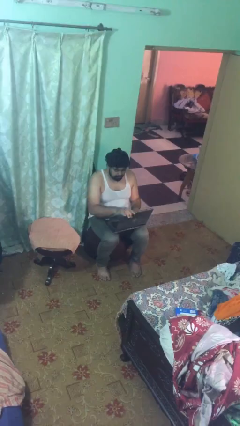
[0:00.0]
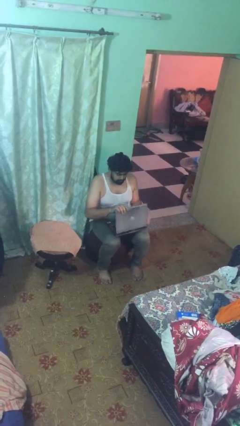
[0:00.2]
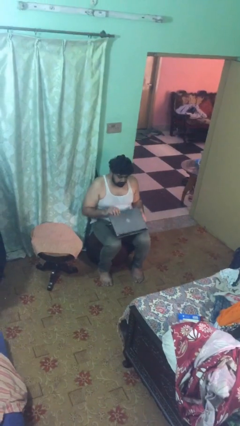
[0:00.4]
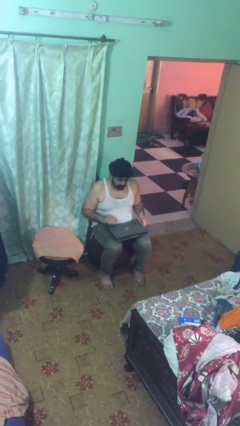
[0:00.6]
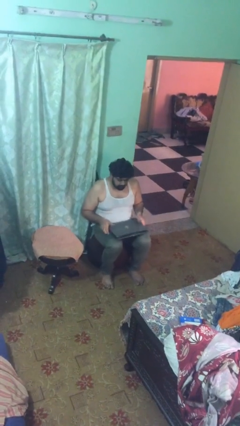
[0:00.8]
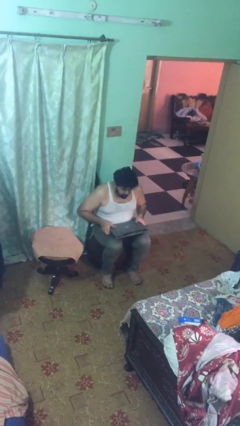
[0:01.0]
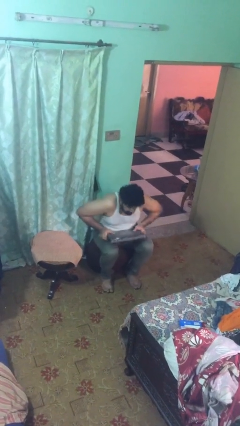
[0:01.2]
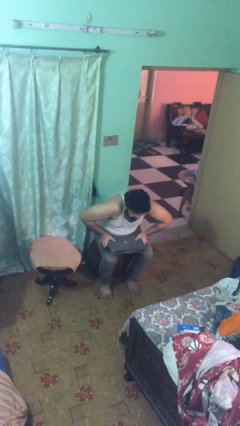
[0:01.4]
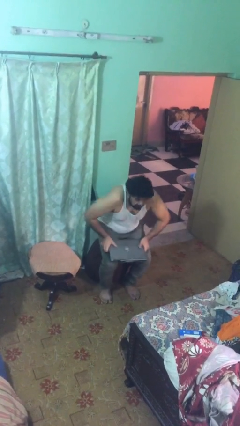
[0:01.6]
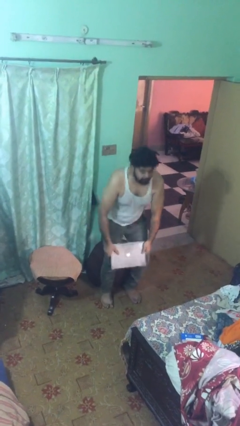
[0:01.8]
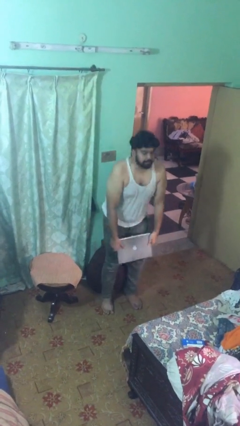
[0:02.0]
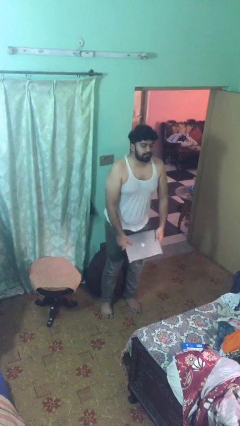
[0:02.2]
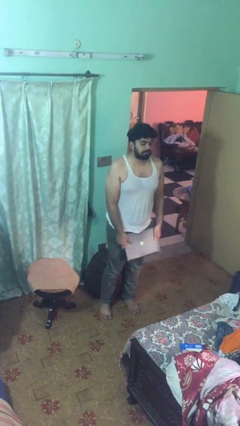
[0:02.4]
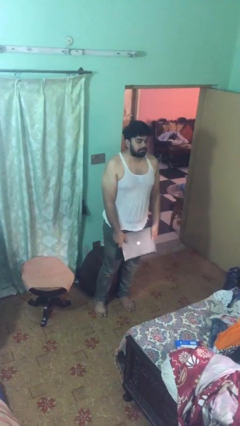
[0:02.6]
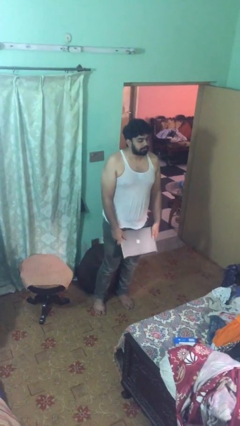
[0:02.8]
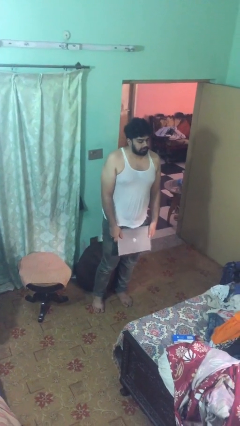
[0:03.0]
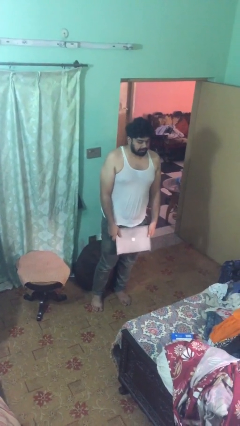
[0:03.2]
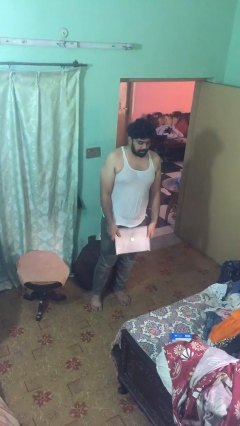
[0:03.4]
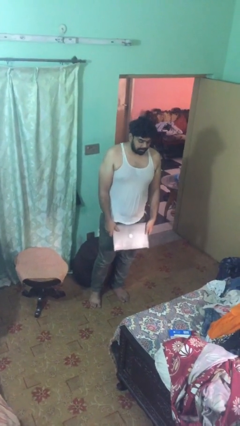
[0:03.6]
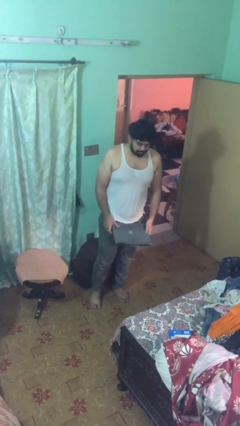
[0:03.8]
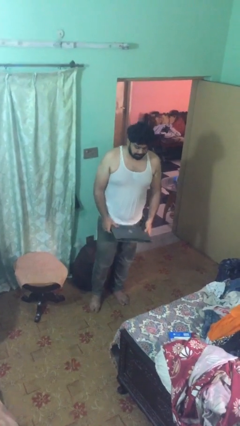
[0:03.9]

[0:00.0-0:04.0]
person stands up

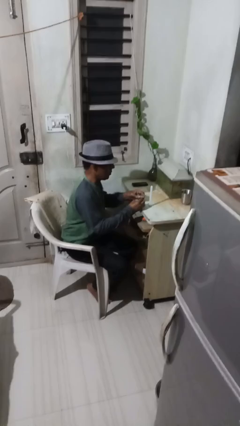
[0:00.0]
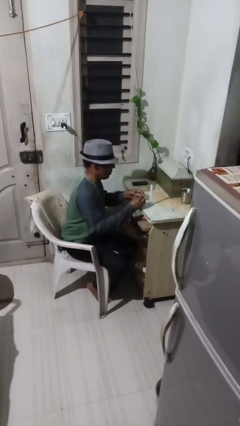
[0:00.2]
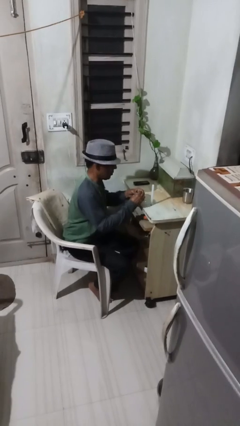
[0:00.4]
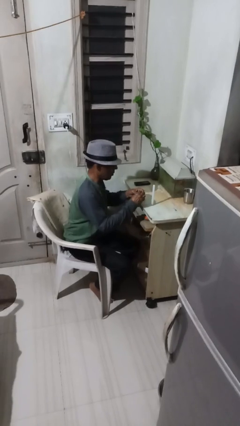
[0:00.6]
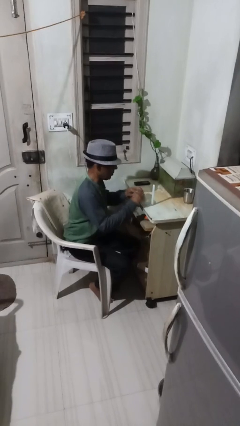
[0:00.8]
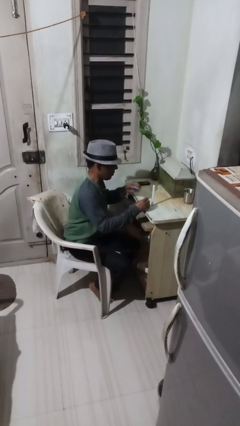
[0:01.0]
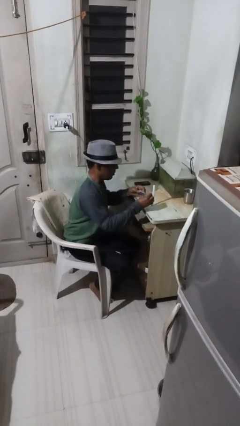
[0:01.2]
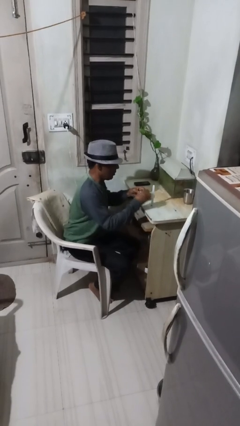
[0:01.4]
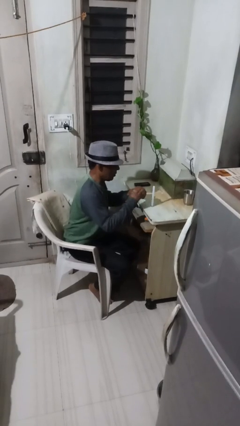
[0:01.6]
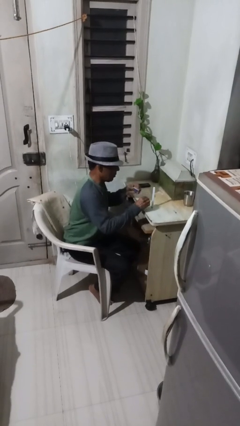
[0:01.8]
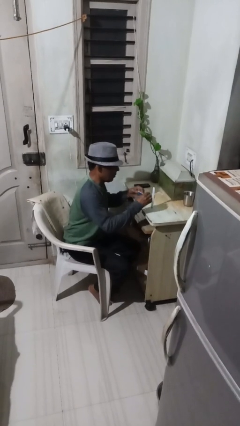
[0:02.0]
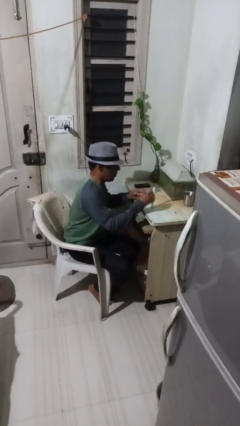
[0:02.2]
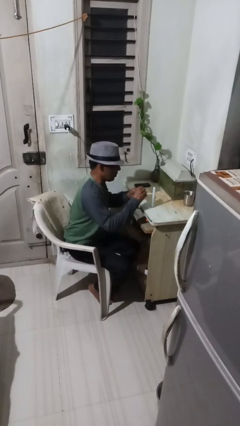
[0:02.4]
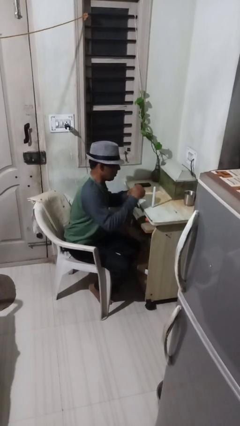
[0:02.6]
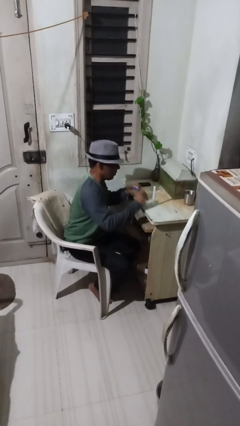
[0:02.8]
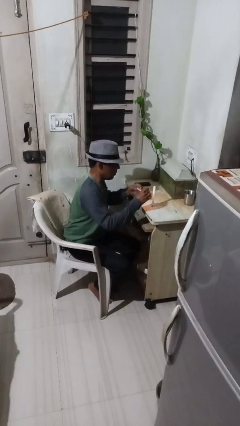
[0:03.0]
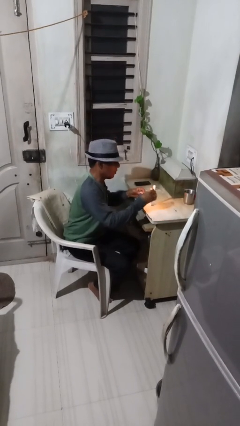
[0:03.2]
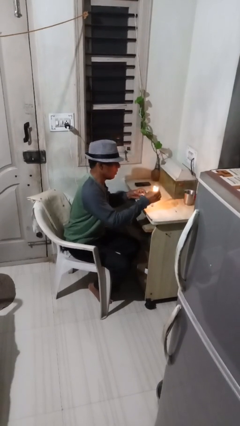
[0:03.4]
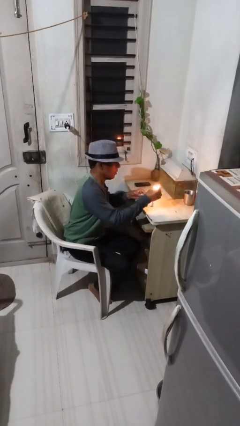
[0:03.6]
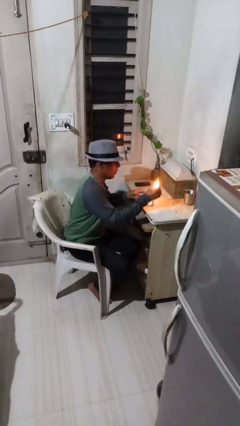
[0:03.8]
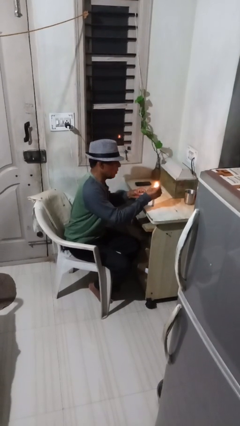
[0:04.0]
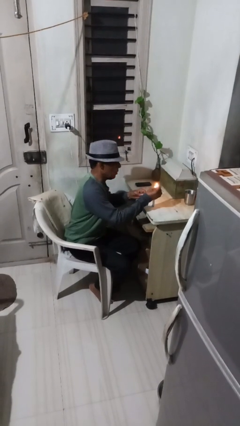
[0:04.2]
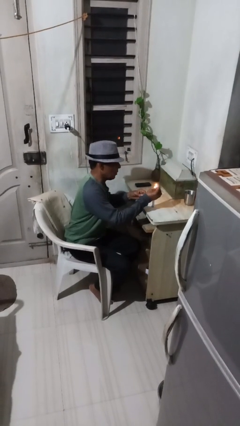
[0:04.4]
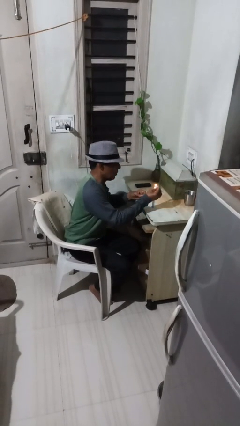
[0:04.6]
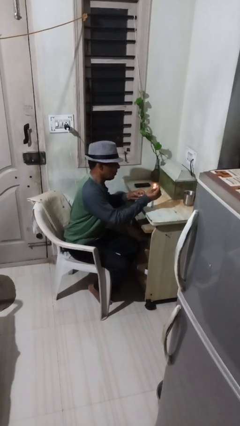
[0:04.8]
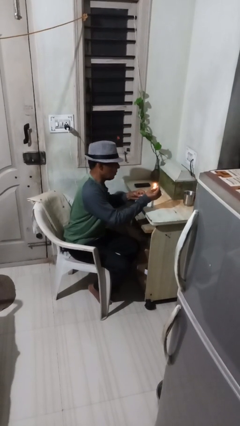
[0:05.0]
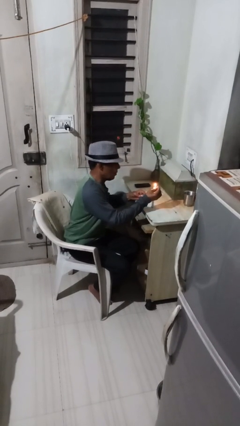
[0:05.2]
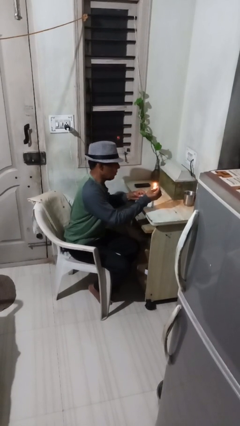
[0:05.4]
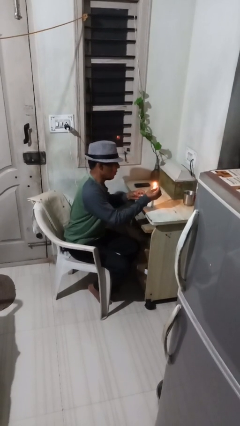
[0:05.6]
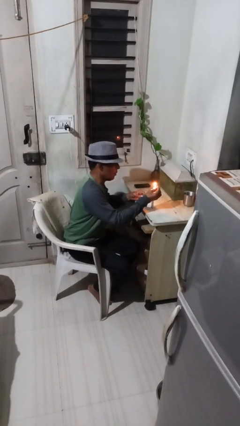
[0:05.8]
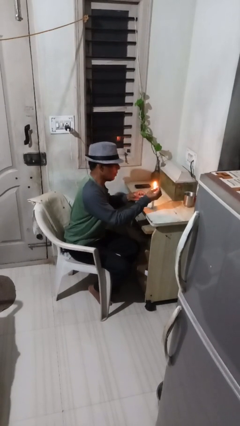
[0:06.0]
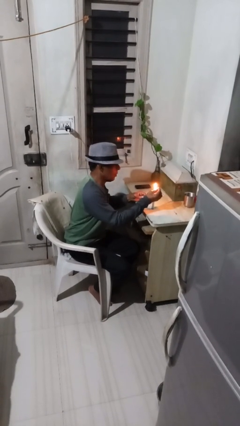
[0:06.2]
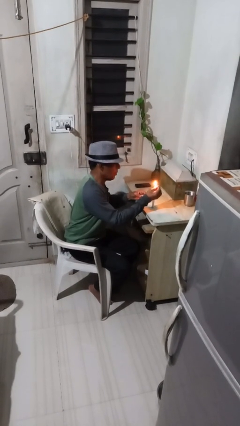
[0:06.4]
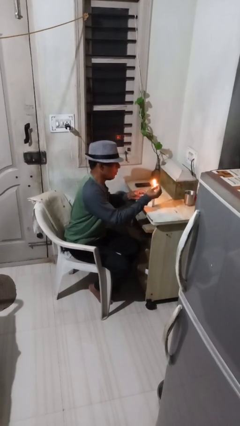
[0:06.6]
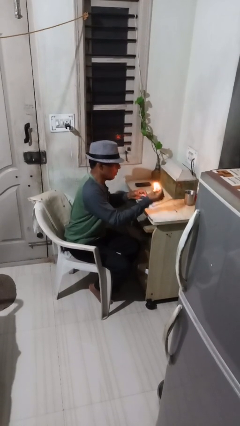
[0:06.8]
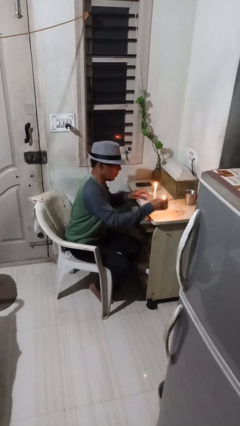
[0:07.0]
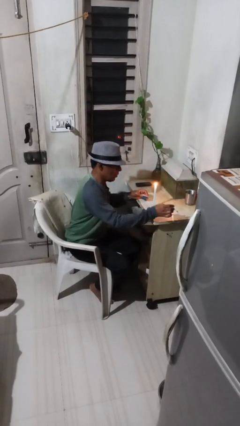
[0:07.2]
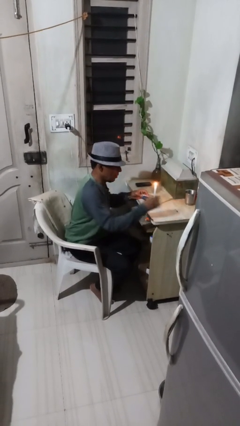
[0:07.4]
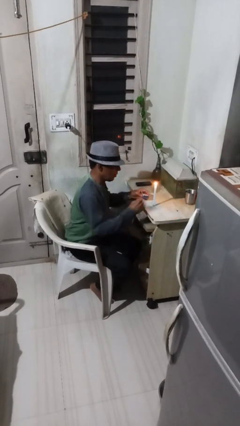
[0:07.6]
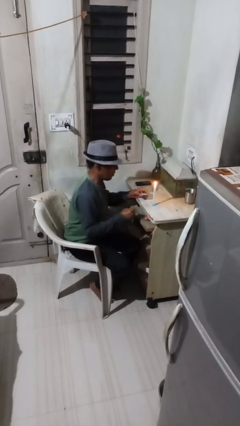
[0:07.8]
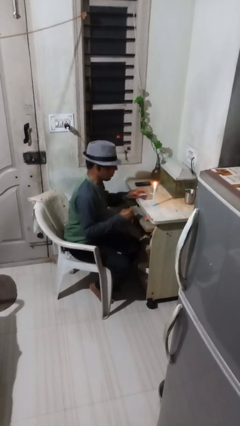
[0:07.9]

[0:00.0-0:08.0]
person lights candle

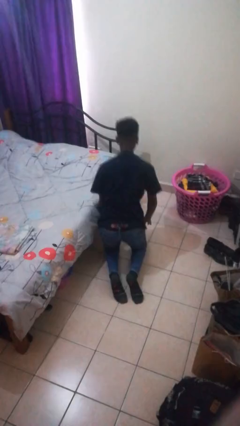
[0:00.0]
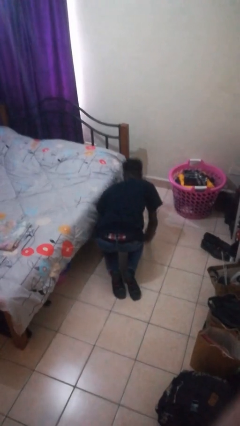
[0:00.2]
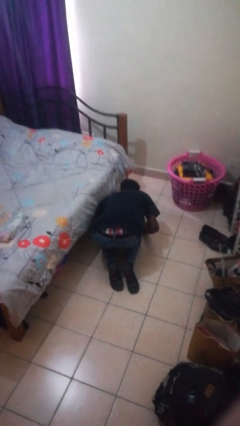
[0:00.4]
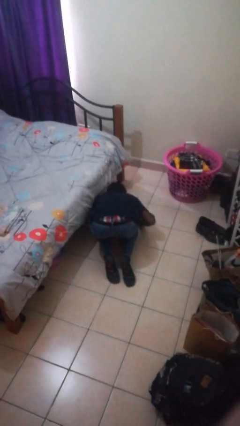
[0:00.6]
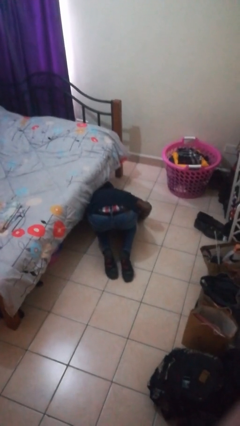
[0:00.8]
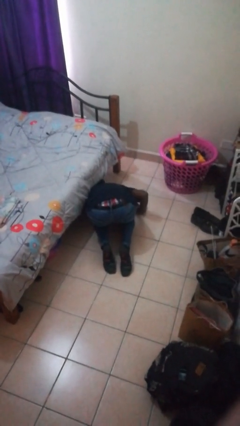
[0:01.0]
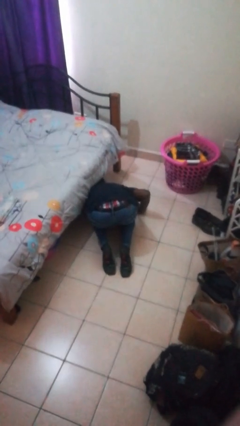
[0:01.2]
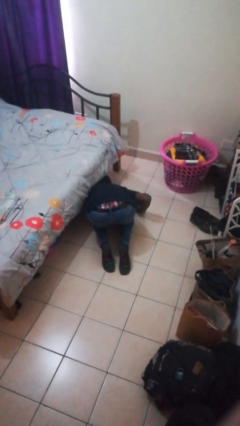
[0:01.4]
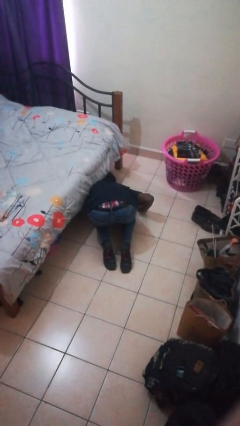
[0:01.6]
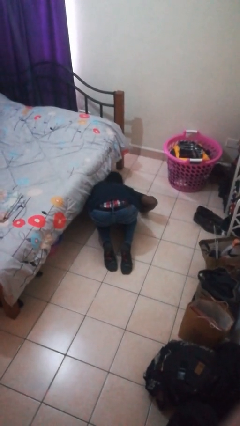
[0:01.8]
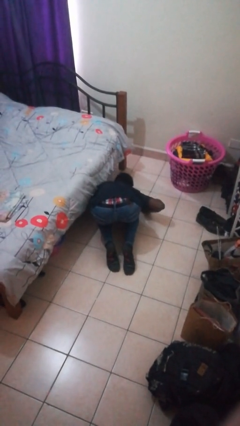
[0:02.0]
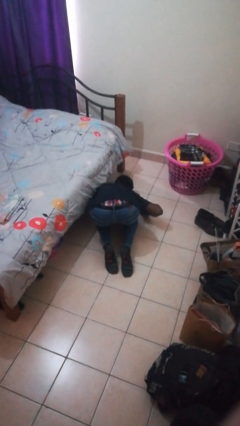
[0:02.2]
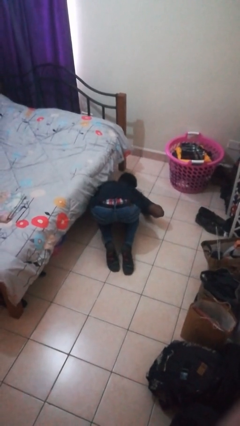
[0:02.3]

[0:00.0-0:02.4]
person searches under bed

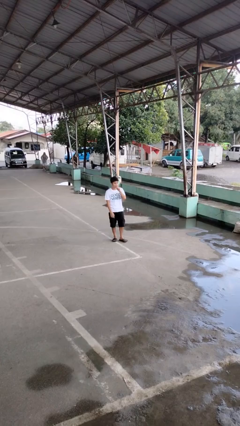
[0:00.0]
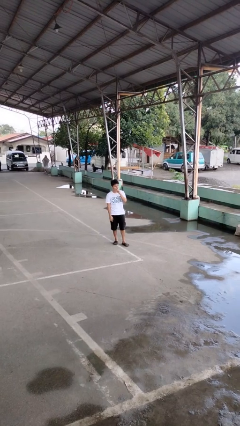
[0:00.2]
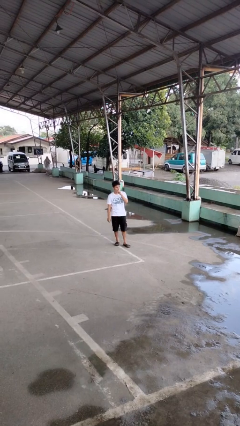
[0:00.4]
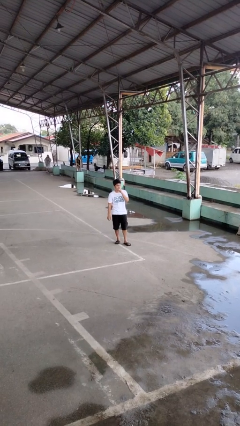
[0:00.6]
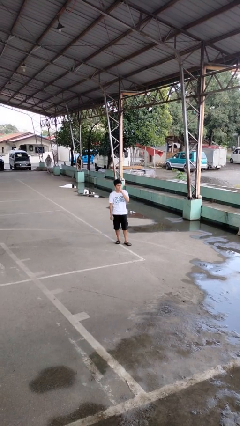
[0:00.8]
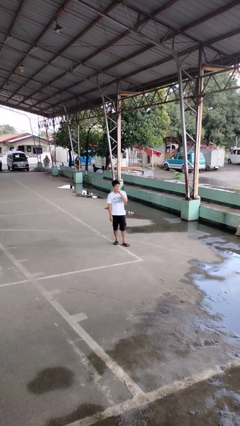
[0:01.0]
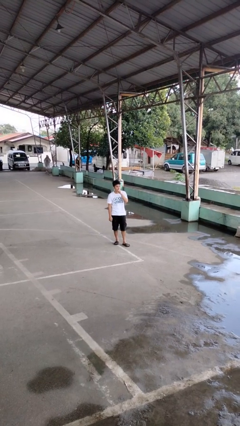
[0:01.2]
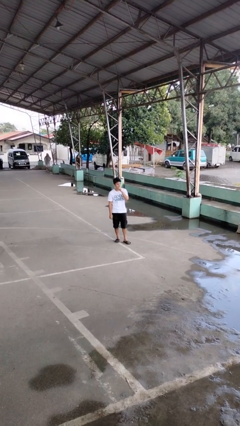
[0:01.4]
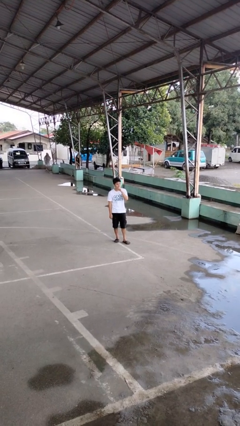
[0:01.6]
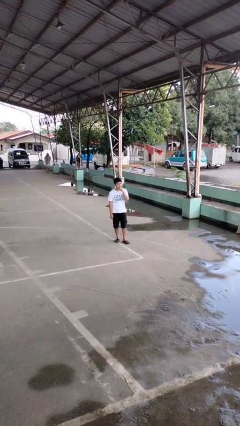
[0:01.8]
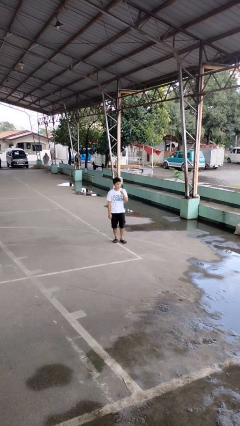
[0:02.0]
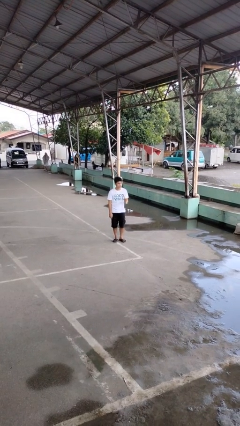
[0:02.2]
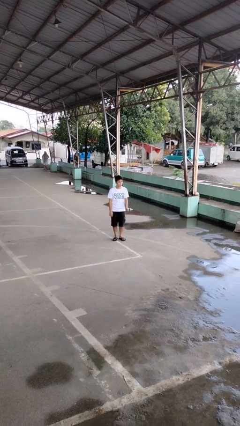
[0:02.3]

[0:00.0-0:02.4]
person gestures be quiet

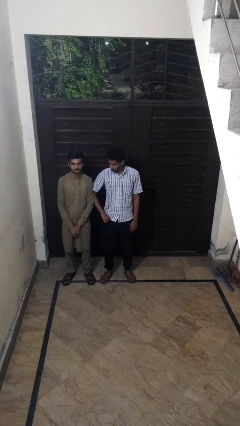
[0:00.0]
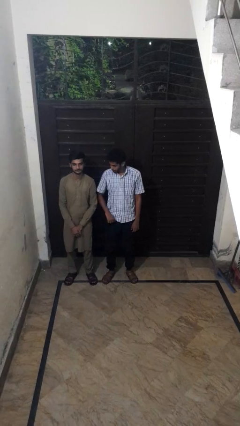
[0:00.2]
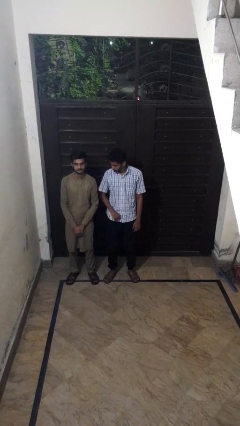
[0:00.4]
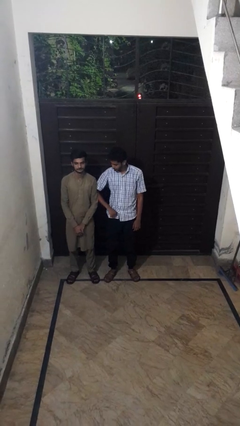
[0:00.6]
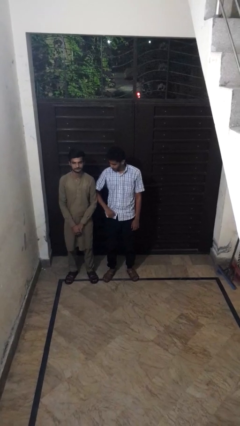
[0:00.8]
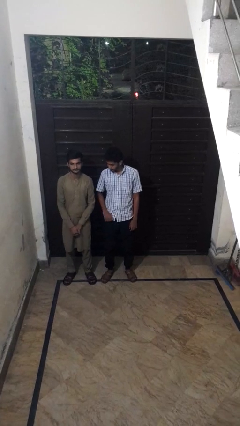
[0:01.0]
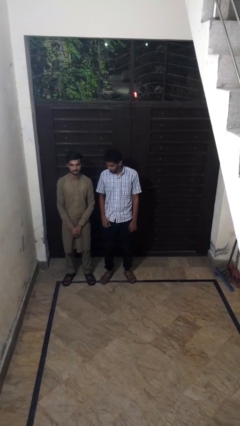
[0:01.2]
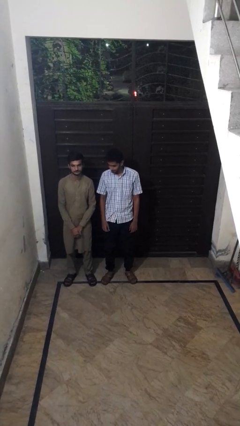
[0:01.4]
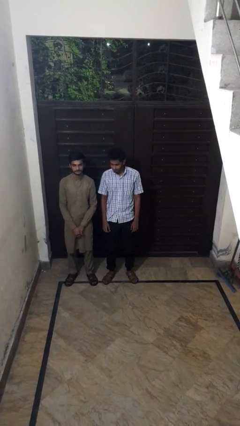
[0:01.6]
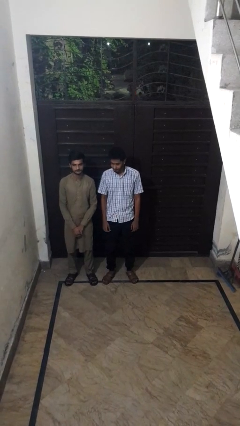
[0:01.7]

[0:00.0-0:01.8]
person nudges person with elbow
